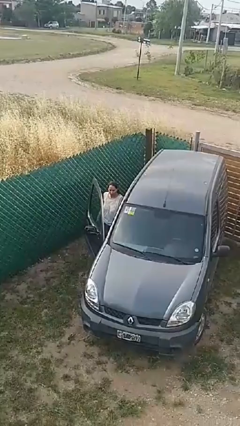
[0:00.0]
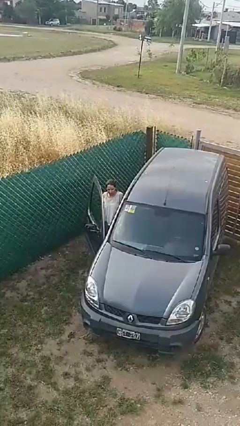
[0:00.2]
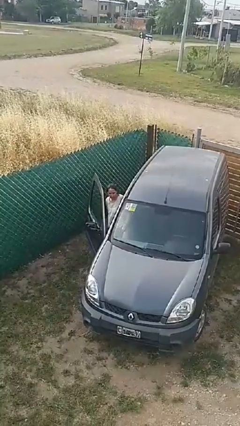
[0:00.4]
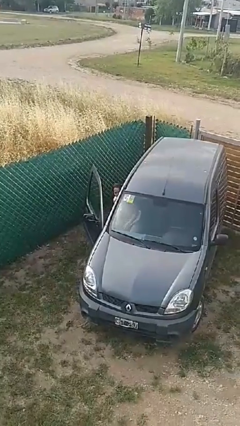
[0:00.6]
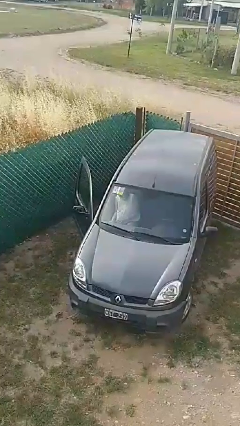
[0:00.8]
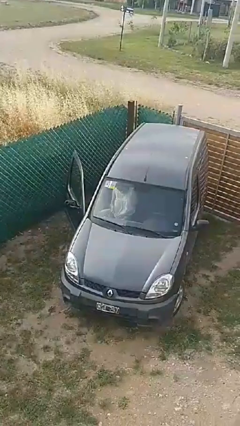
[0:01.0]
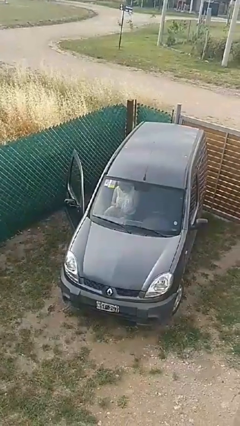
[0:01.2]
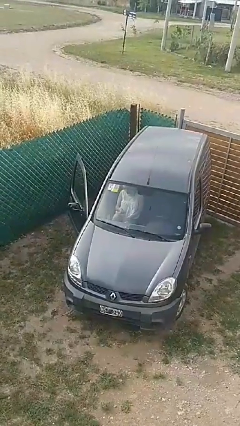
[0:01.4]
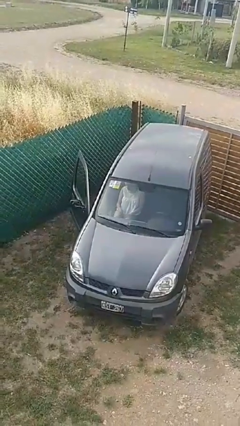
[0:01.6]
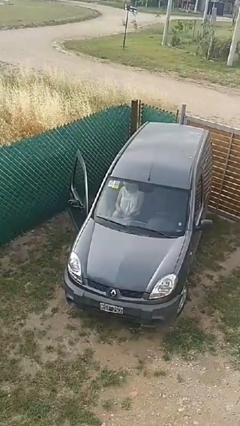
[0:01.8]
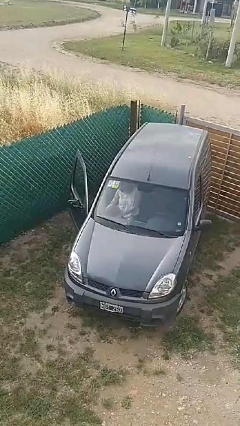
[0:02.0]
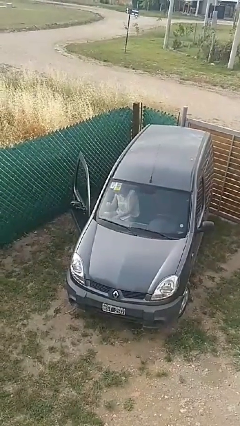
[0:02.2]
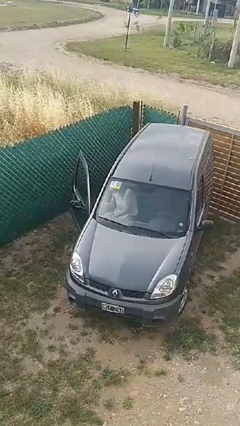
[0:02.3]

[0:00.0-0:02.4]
person enters car

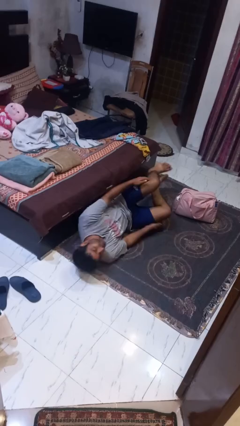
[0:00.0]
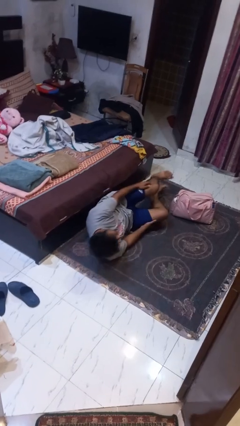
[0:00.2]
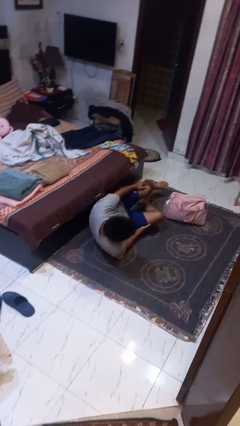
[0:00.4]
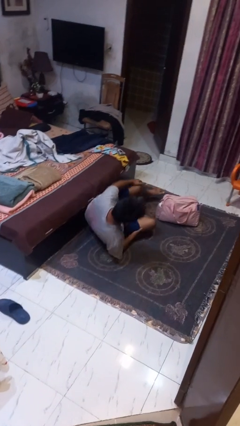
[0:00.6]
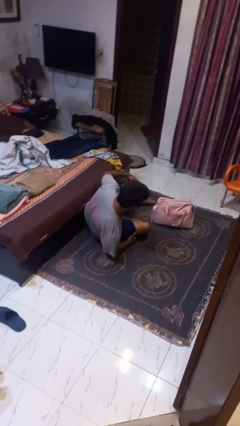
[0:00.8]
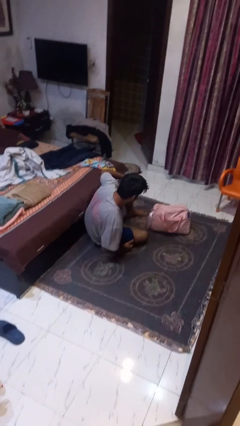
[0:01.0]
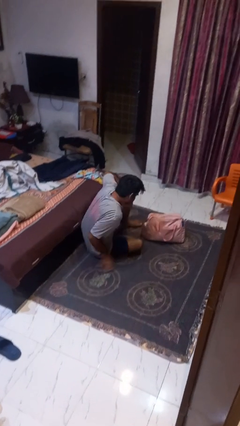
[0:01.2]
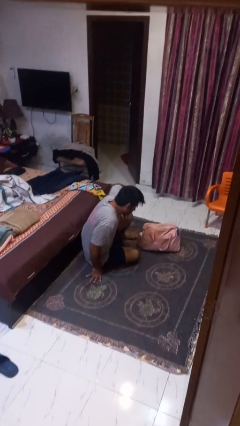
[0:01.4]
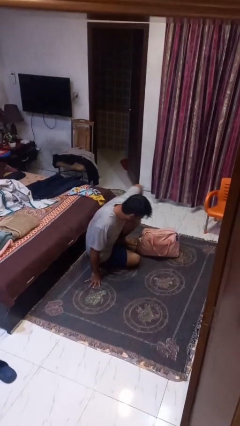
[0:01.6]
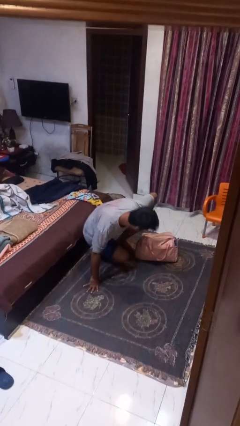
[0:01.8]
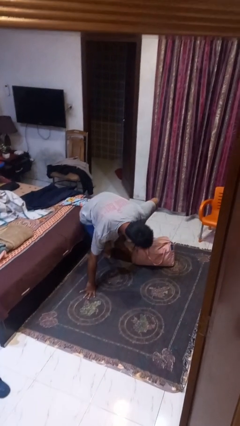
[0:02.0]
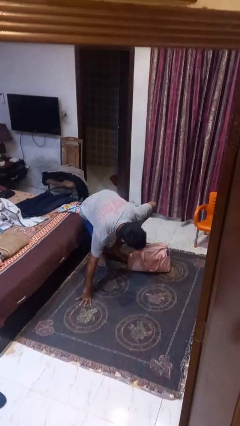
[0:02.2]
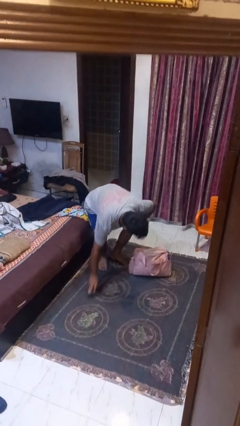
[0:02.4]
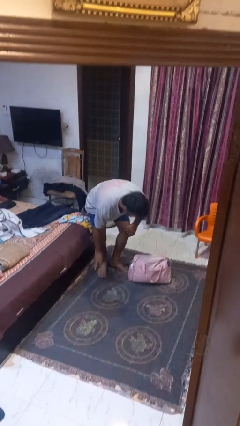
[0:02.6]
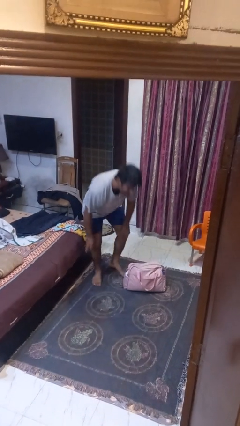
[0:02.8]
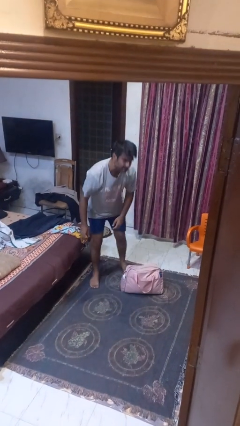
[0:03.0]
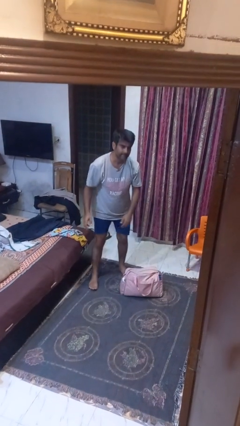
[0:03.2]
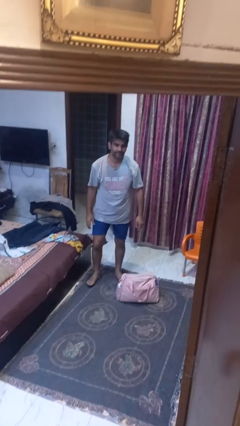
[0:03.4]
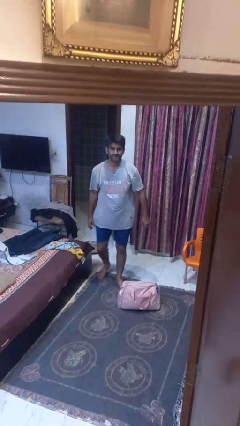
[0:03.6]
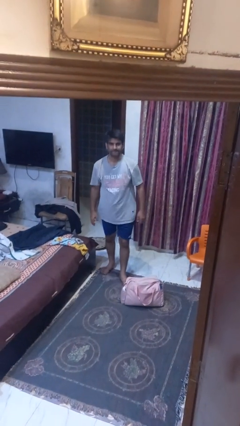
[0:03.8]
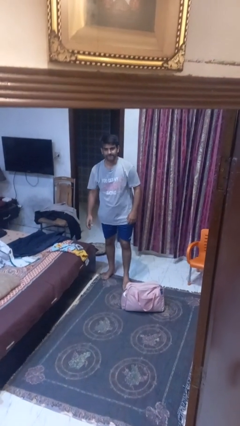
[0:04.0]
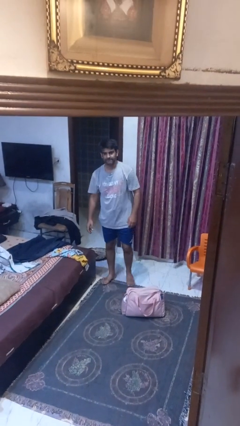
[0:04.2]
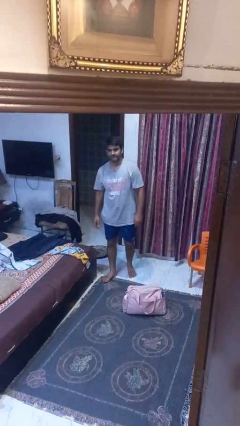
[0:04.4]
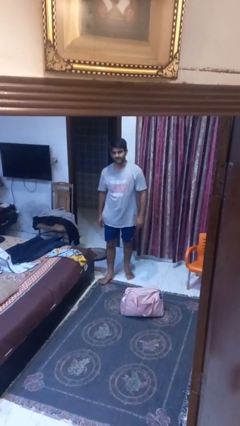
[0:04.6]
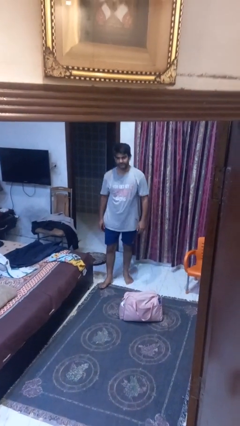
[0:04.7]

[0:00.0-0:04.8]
person stands up from floor

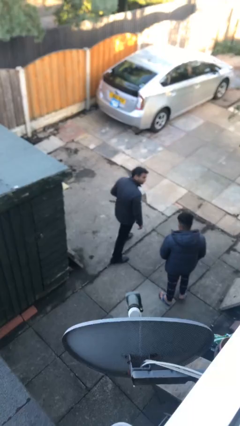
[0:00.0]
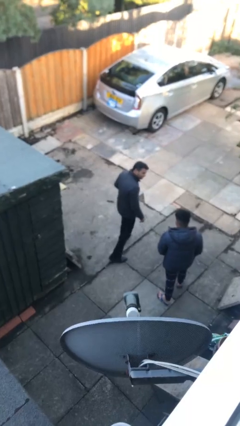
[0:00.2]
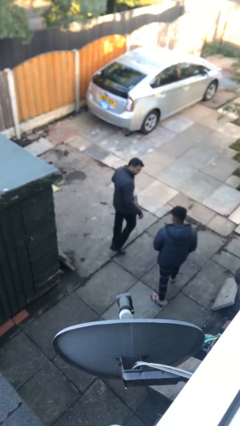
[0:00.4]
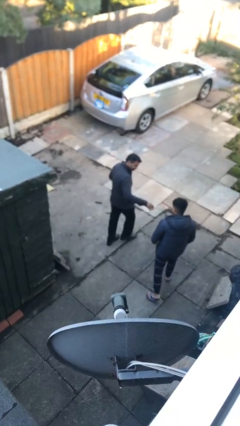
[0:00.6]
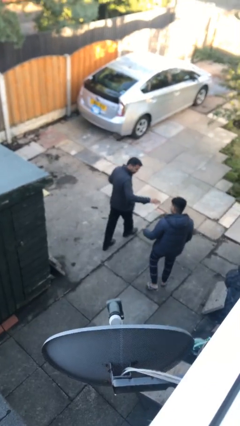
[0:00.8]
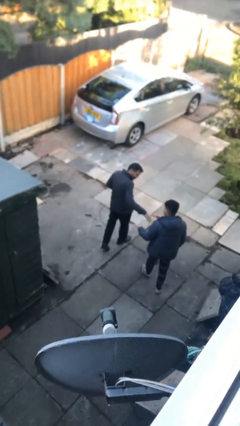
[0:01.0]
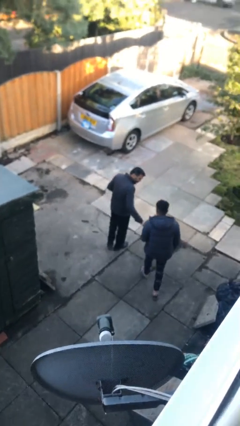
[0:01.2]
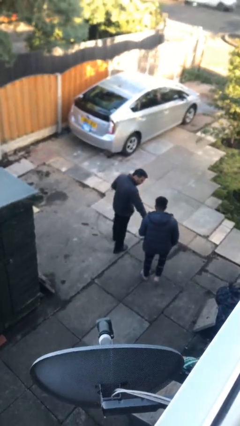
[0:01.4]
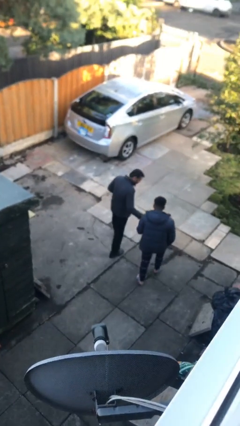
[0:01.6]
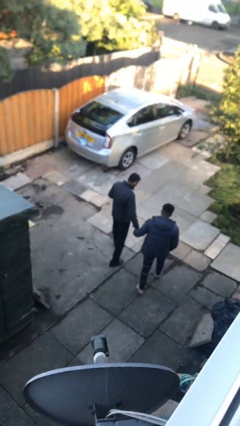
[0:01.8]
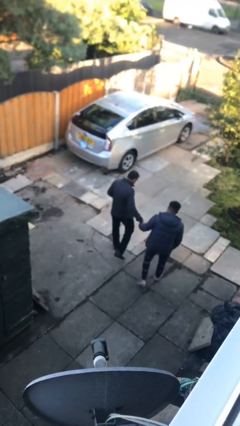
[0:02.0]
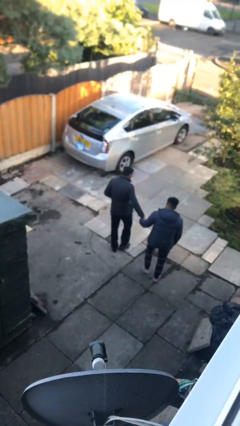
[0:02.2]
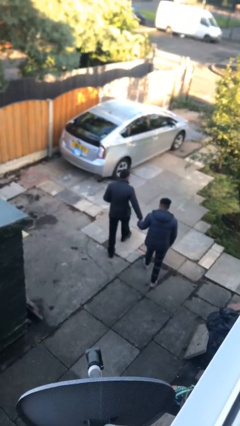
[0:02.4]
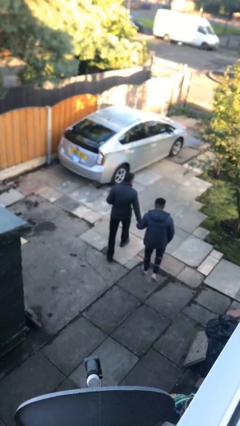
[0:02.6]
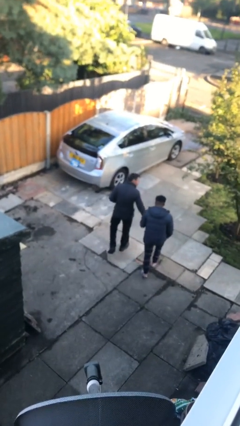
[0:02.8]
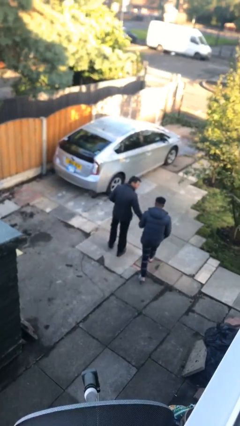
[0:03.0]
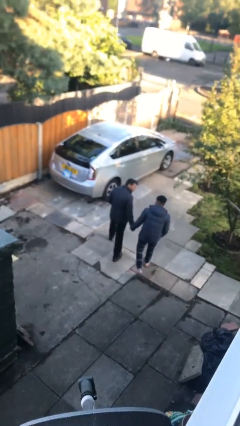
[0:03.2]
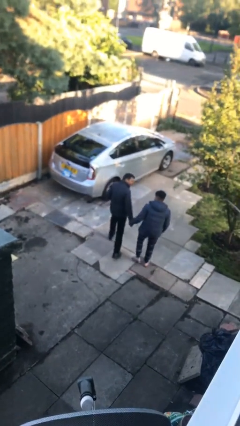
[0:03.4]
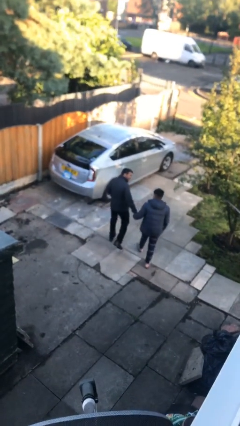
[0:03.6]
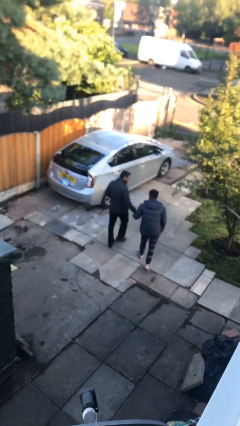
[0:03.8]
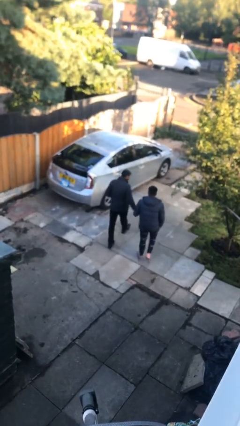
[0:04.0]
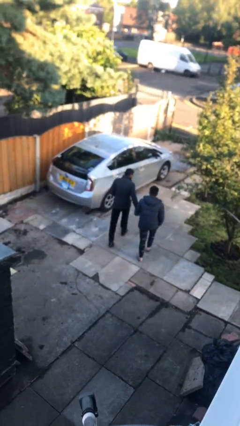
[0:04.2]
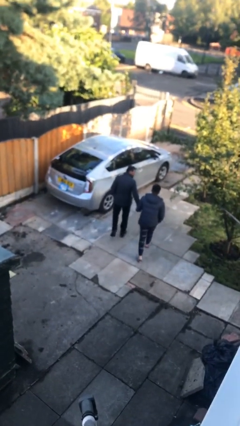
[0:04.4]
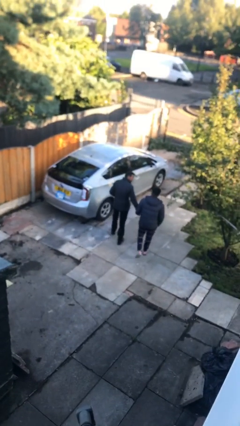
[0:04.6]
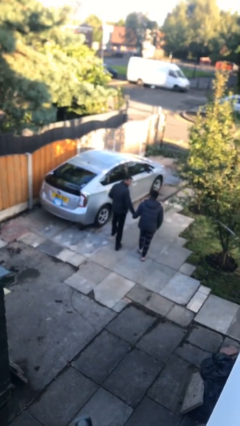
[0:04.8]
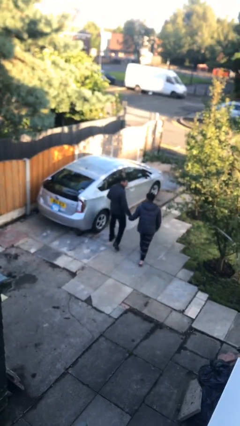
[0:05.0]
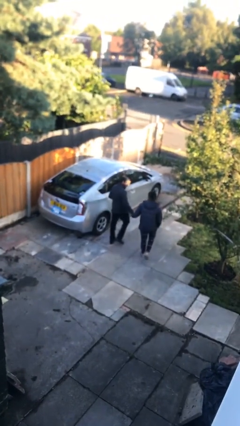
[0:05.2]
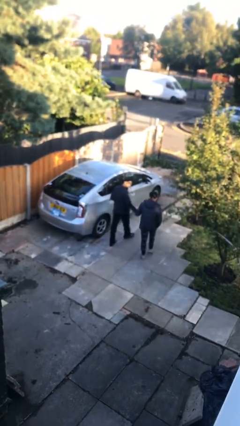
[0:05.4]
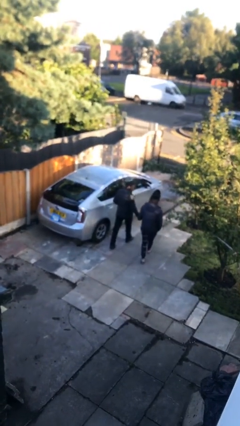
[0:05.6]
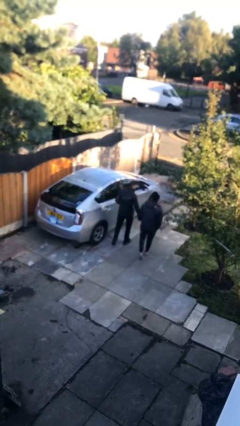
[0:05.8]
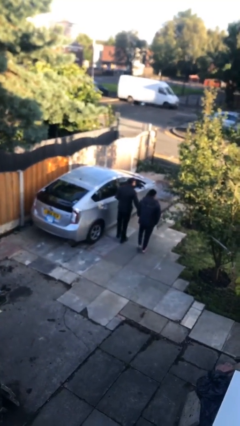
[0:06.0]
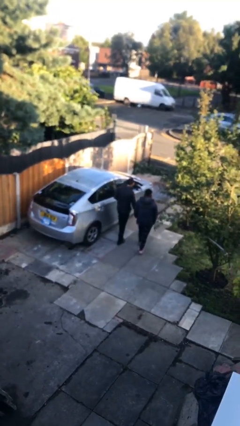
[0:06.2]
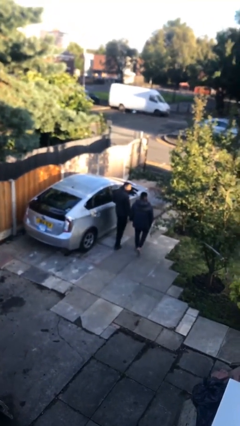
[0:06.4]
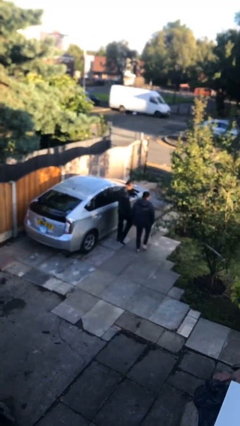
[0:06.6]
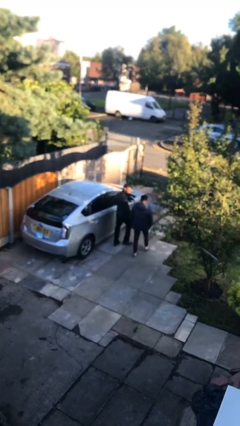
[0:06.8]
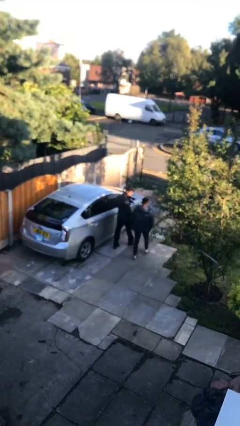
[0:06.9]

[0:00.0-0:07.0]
person holds hand

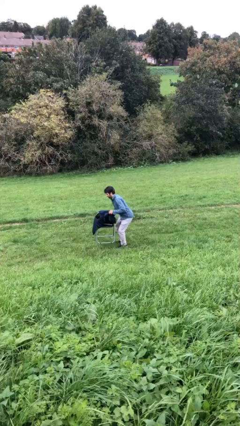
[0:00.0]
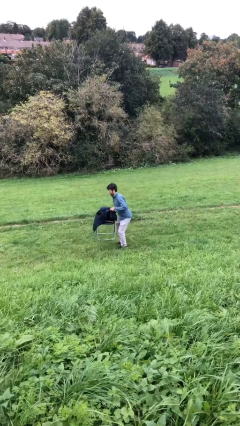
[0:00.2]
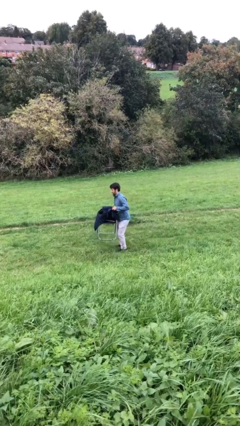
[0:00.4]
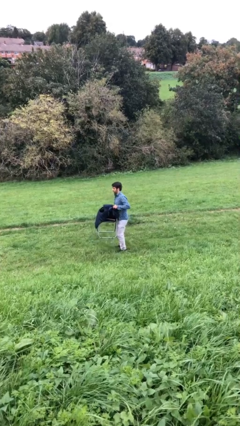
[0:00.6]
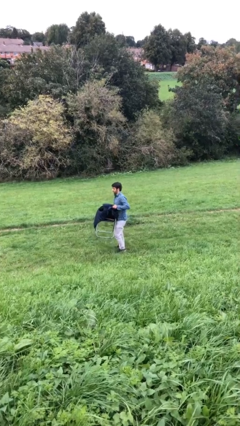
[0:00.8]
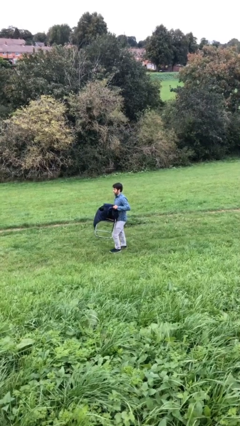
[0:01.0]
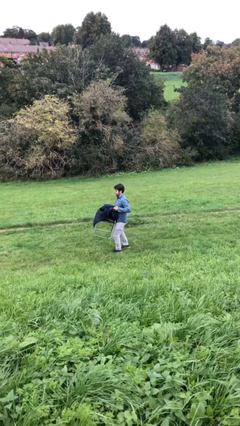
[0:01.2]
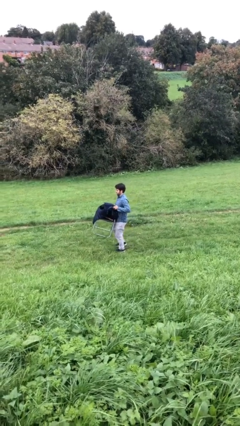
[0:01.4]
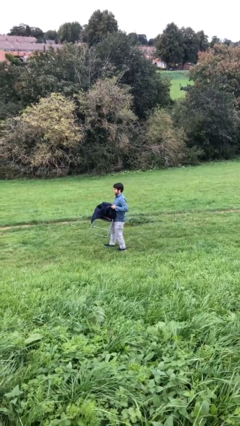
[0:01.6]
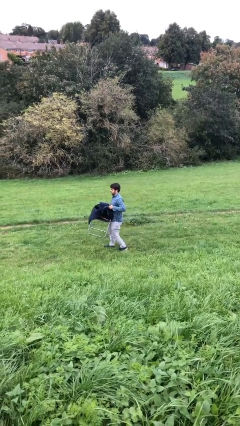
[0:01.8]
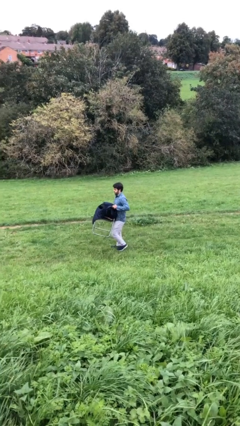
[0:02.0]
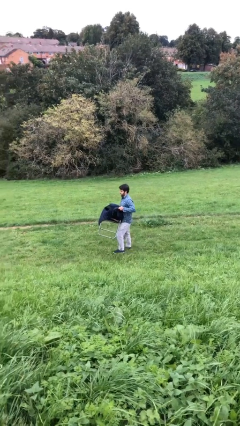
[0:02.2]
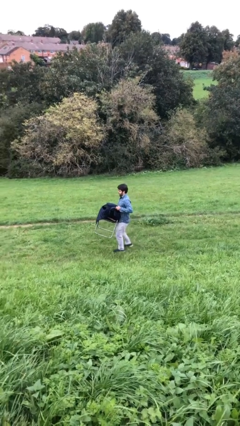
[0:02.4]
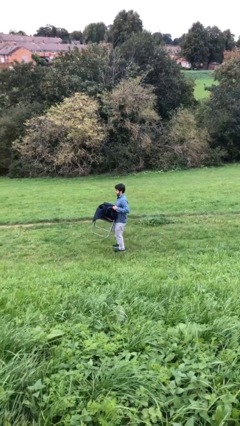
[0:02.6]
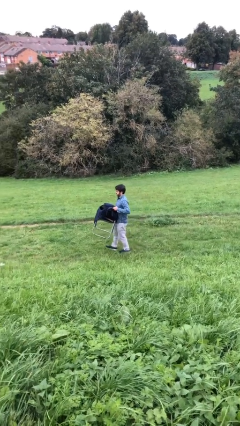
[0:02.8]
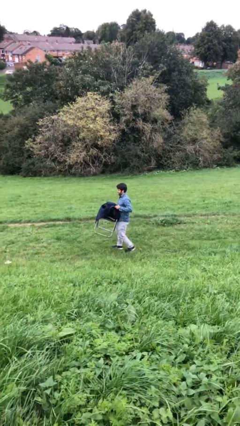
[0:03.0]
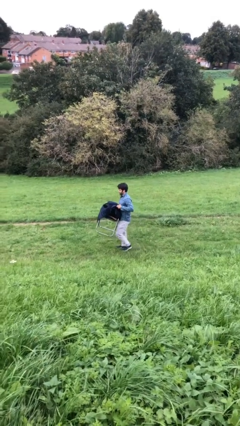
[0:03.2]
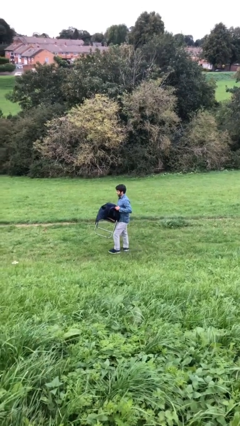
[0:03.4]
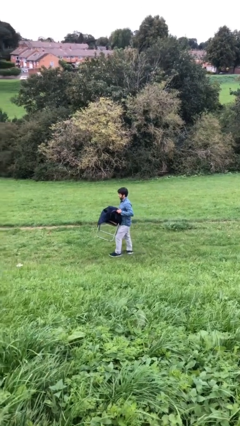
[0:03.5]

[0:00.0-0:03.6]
person carries heavy object
